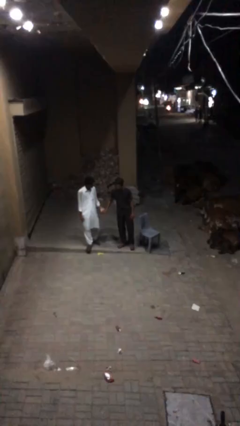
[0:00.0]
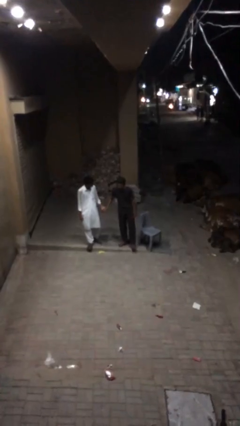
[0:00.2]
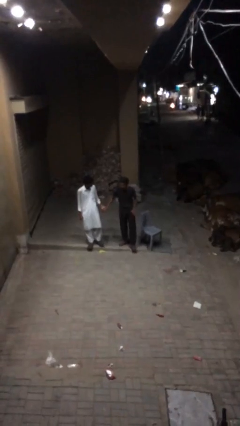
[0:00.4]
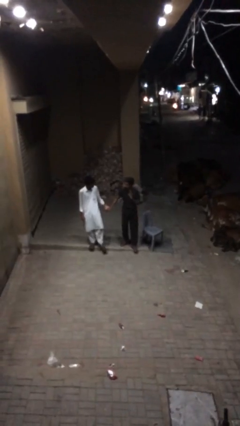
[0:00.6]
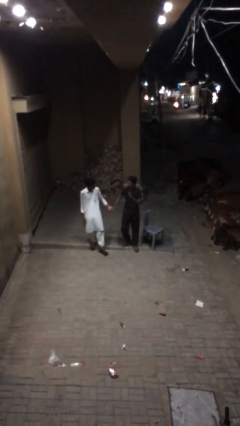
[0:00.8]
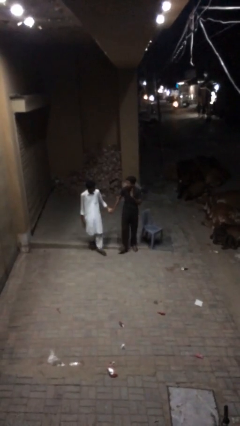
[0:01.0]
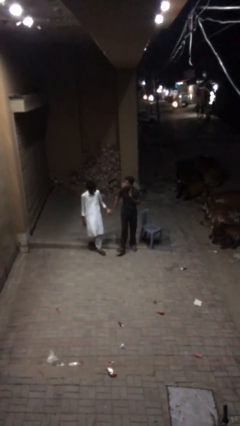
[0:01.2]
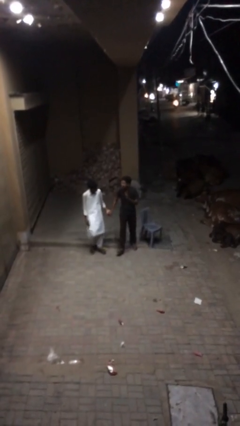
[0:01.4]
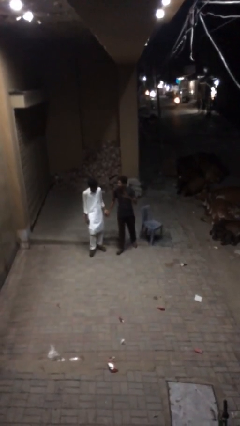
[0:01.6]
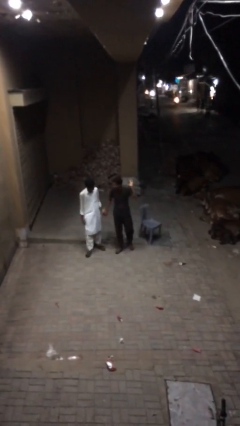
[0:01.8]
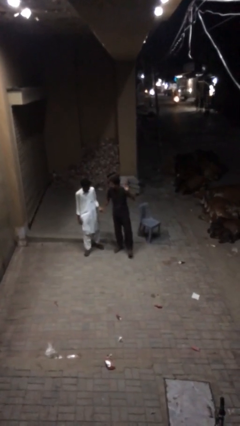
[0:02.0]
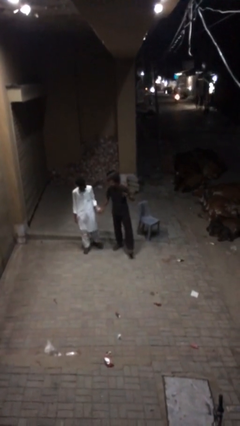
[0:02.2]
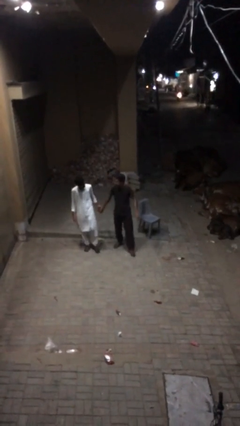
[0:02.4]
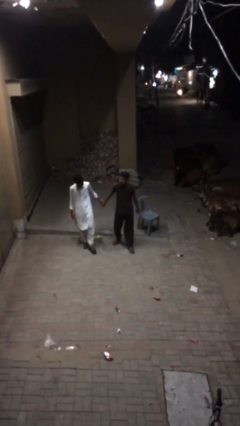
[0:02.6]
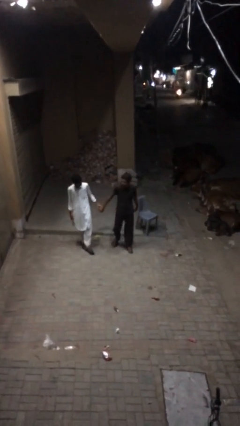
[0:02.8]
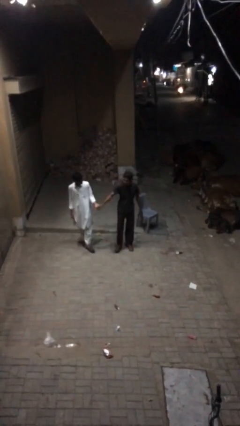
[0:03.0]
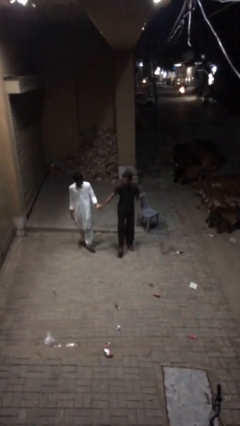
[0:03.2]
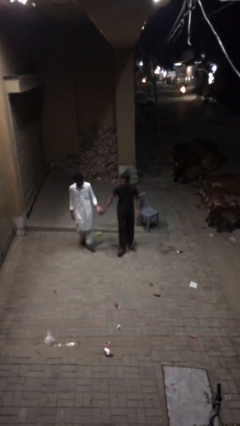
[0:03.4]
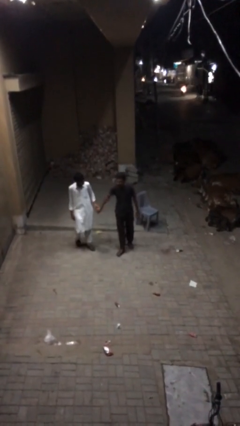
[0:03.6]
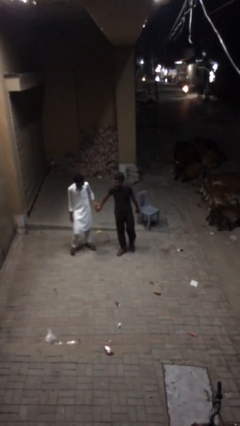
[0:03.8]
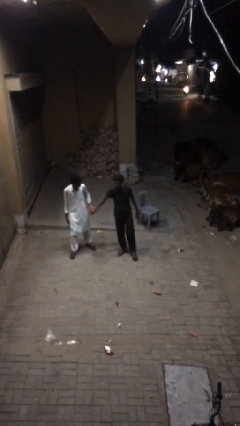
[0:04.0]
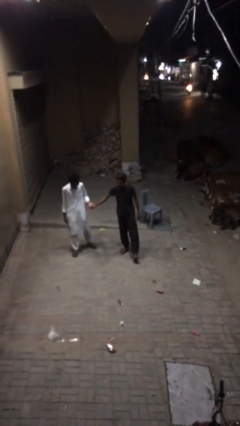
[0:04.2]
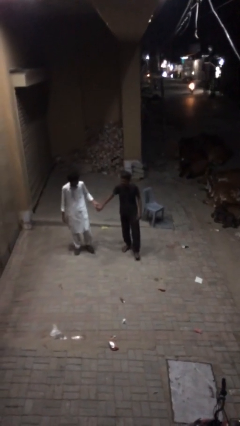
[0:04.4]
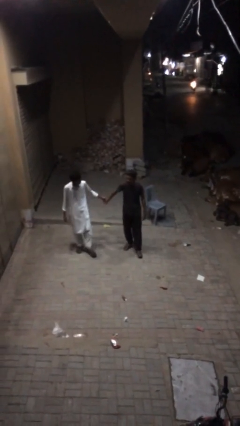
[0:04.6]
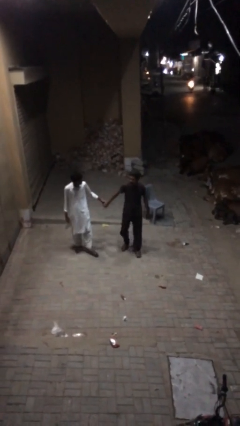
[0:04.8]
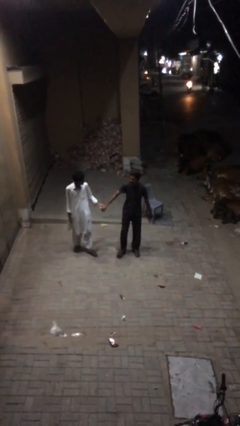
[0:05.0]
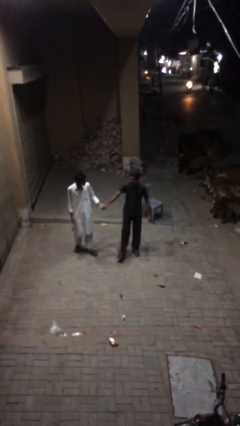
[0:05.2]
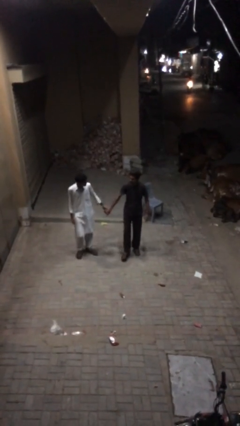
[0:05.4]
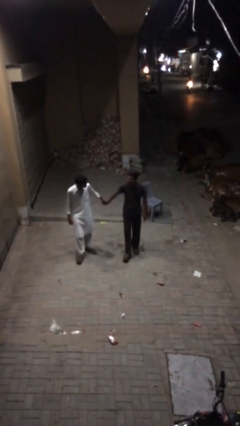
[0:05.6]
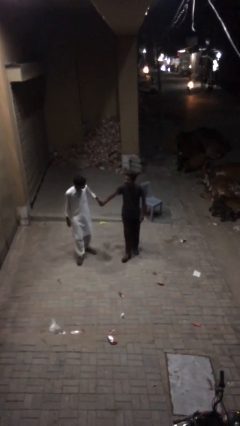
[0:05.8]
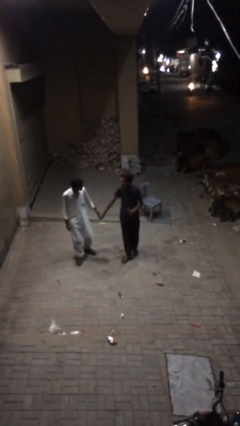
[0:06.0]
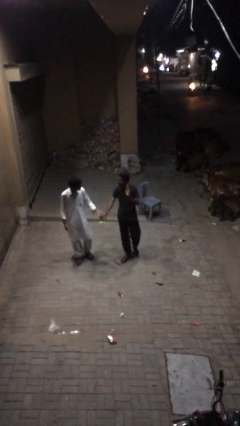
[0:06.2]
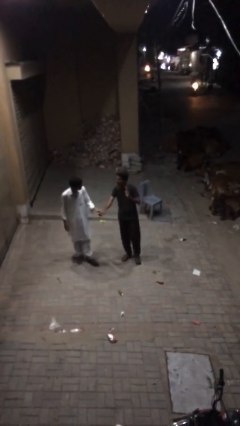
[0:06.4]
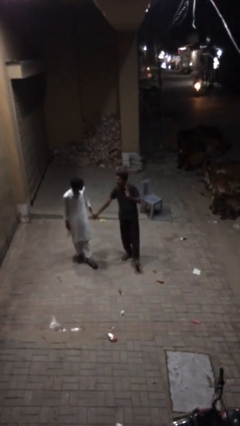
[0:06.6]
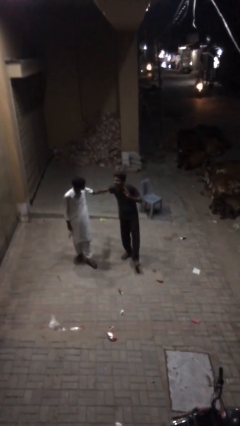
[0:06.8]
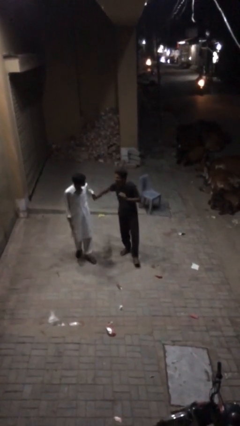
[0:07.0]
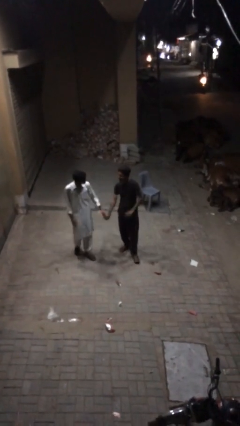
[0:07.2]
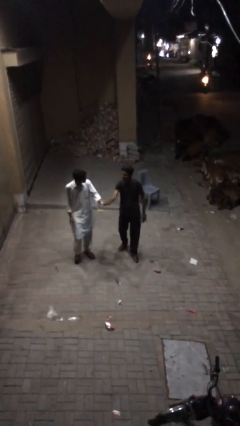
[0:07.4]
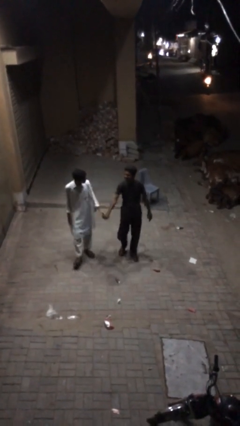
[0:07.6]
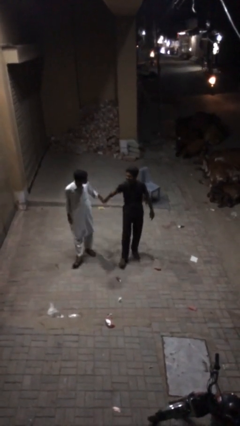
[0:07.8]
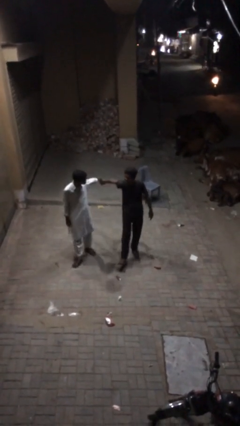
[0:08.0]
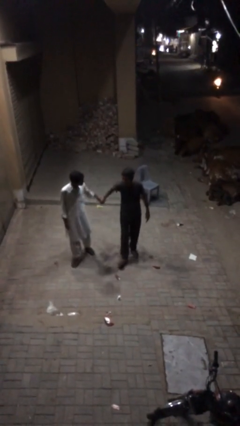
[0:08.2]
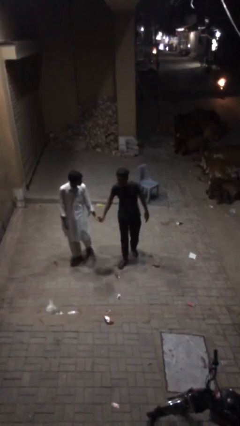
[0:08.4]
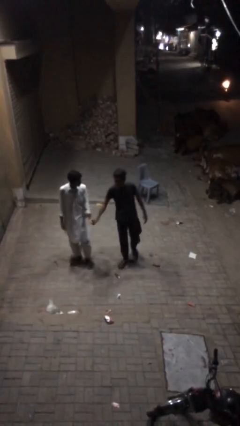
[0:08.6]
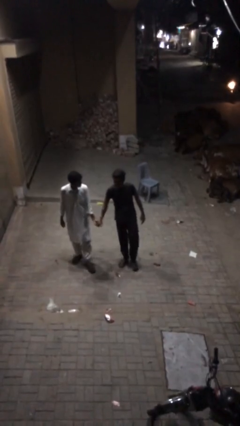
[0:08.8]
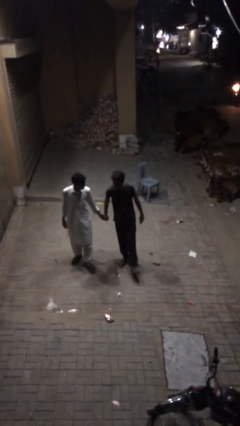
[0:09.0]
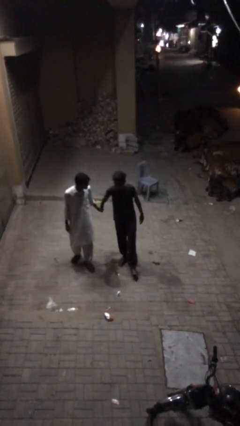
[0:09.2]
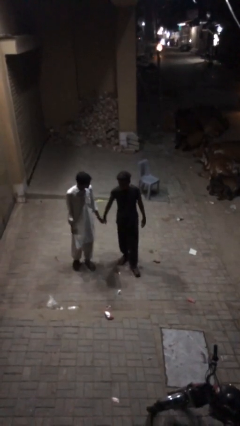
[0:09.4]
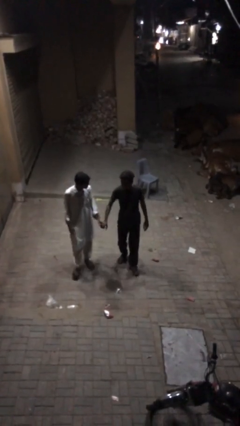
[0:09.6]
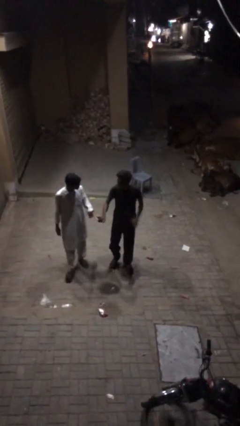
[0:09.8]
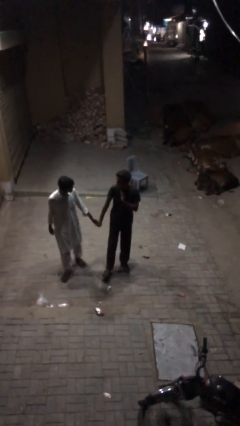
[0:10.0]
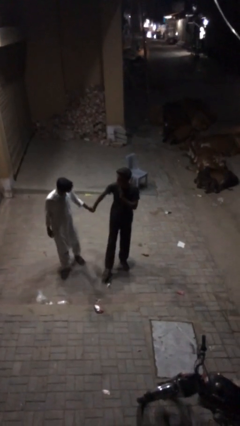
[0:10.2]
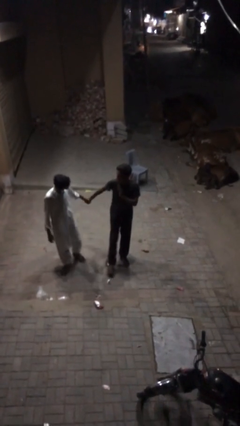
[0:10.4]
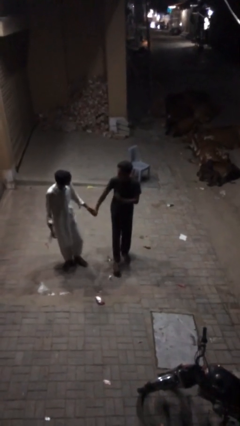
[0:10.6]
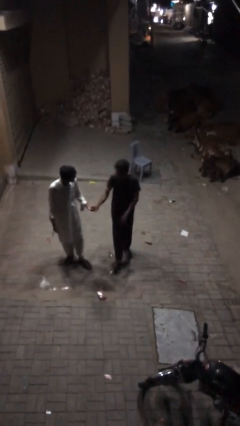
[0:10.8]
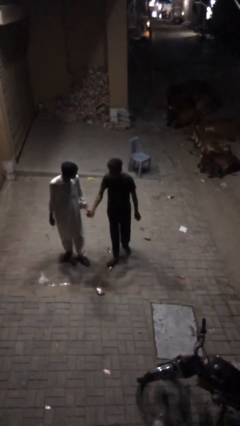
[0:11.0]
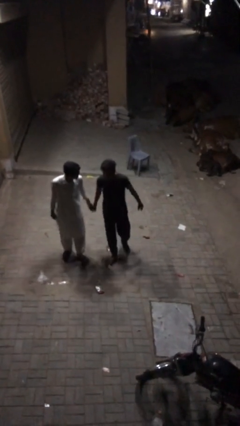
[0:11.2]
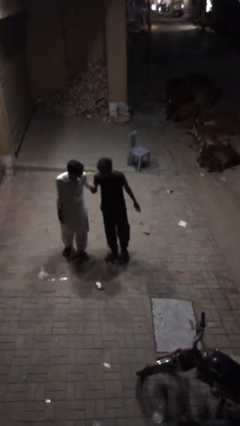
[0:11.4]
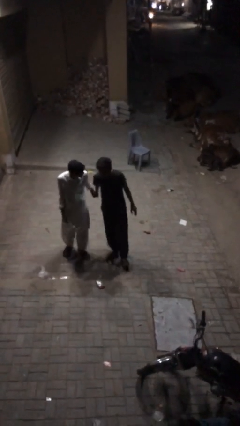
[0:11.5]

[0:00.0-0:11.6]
person holds hand

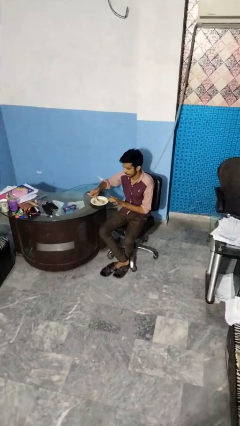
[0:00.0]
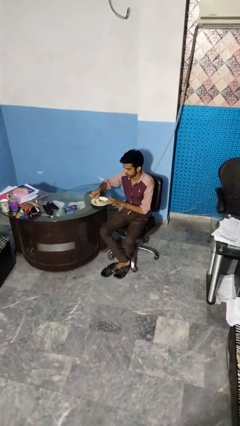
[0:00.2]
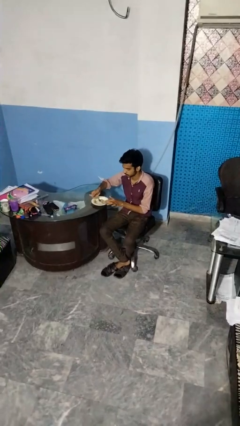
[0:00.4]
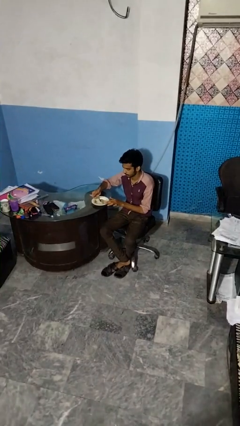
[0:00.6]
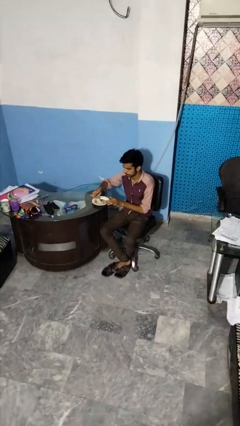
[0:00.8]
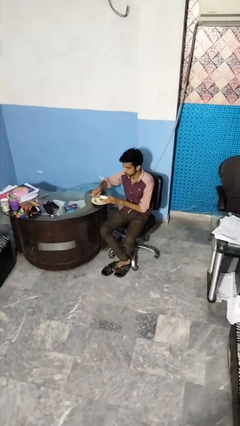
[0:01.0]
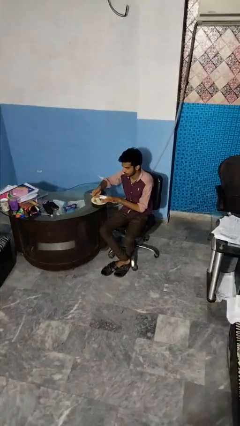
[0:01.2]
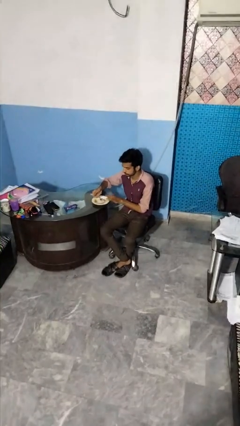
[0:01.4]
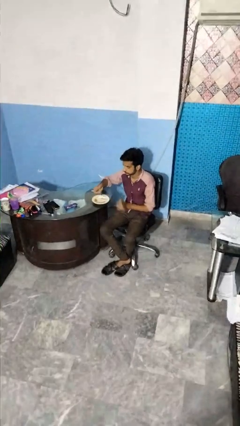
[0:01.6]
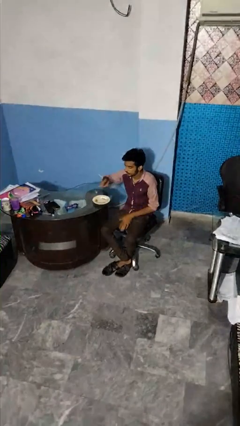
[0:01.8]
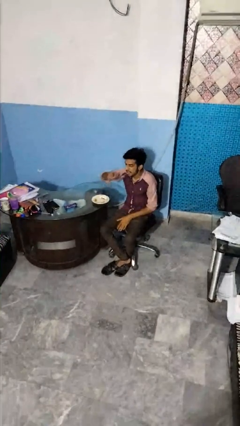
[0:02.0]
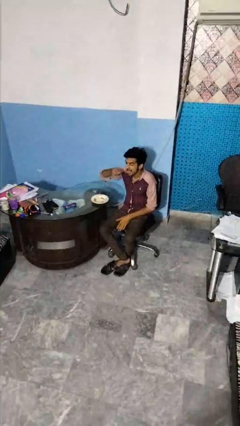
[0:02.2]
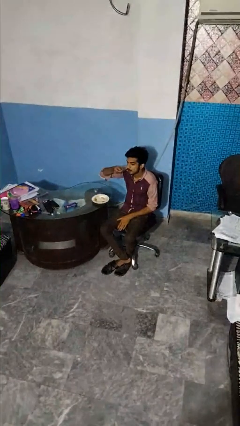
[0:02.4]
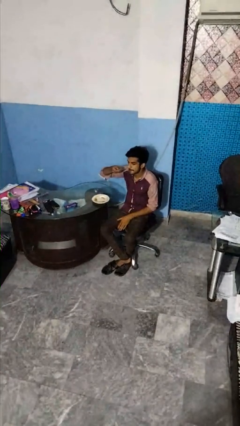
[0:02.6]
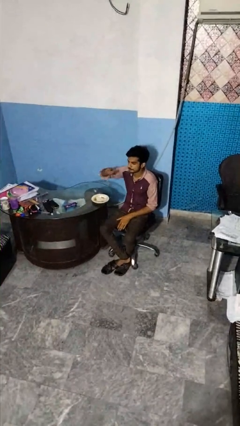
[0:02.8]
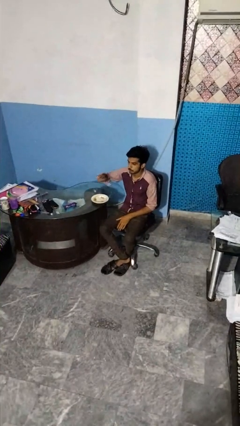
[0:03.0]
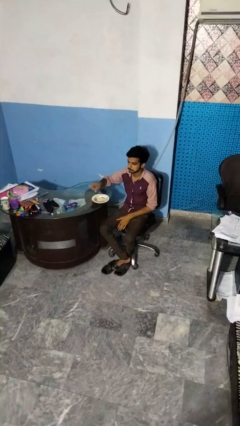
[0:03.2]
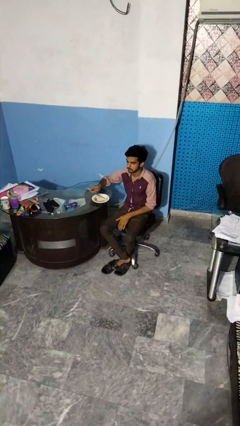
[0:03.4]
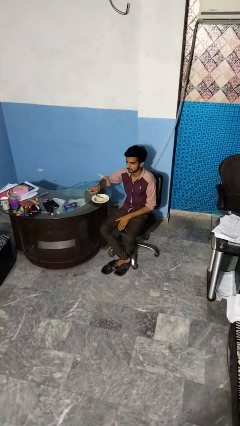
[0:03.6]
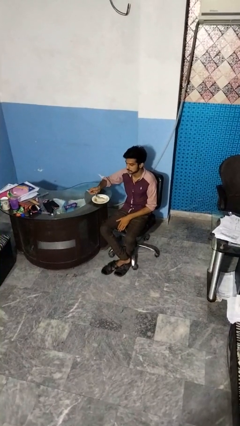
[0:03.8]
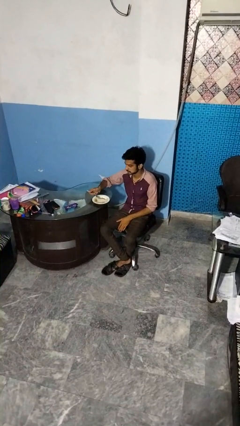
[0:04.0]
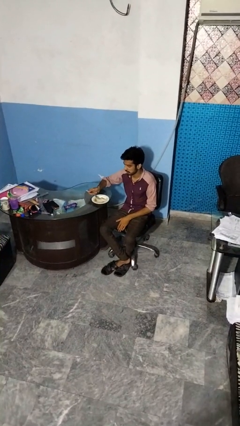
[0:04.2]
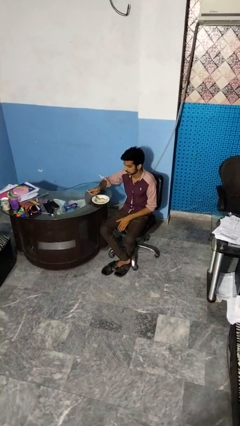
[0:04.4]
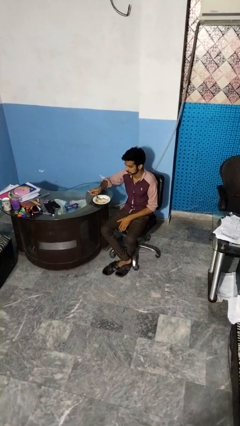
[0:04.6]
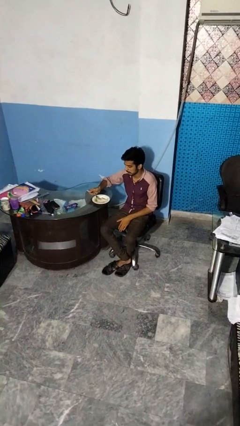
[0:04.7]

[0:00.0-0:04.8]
person eats with utensil

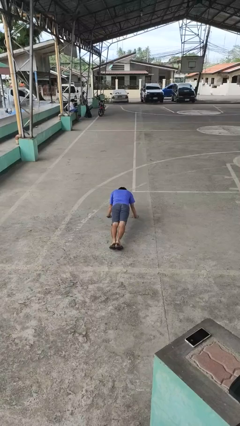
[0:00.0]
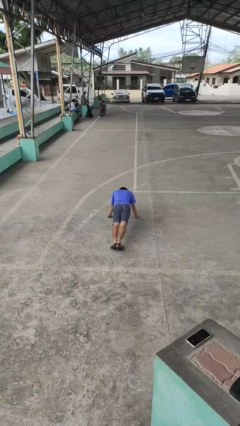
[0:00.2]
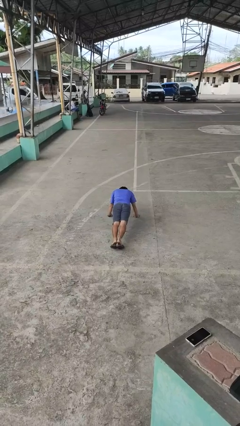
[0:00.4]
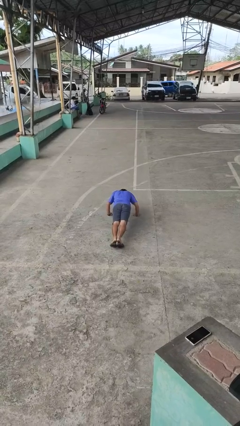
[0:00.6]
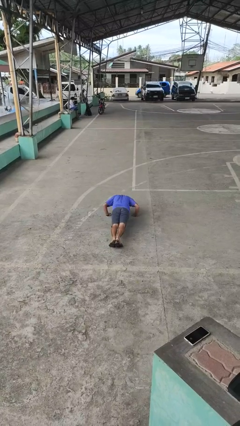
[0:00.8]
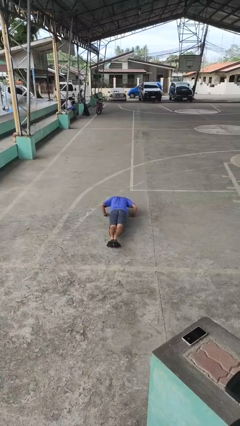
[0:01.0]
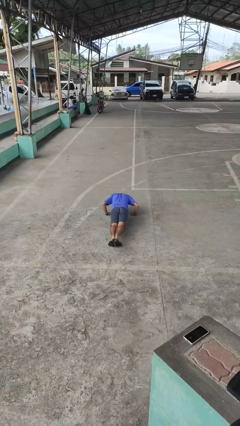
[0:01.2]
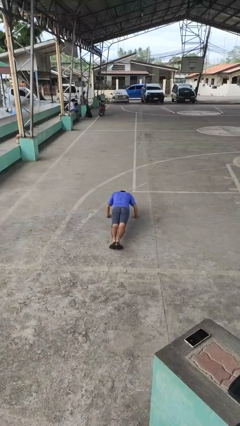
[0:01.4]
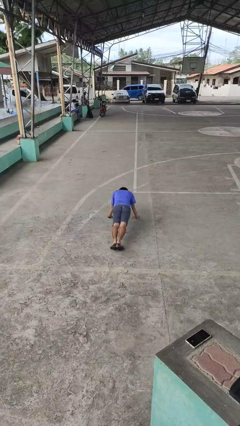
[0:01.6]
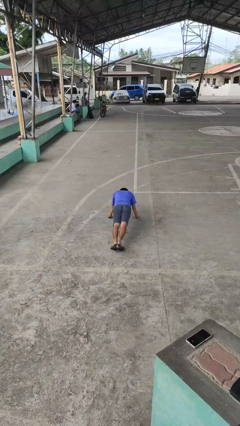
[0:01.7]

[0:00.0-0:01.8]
person exercises with pushup
